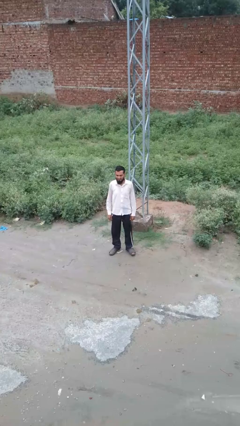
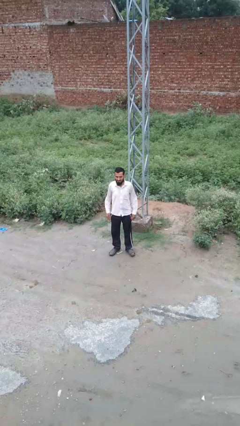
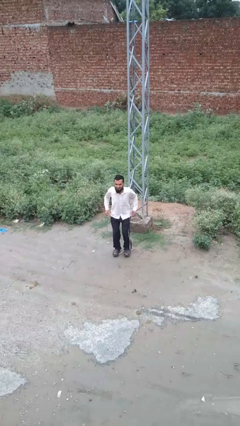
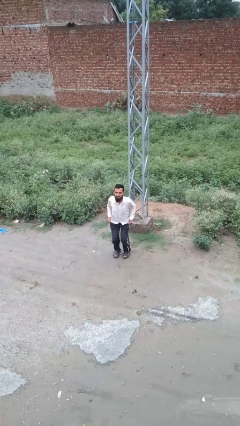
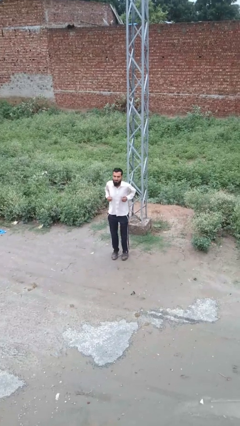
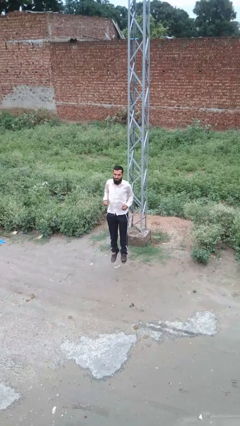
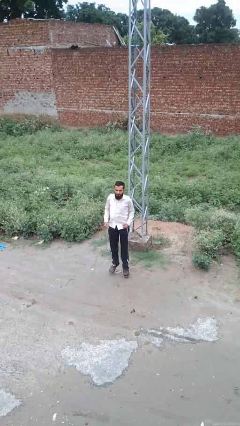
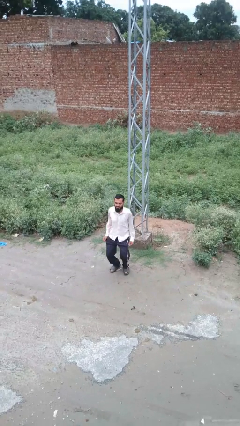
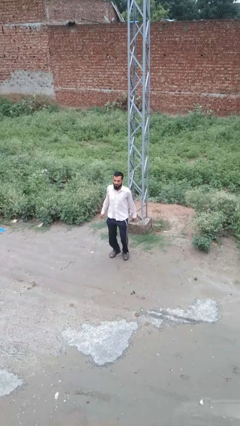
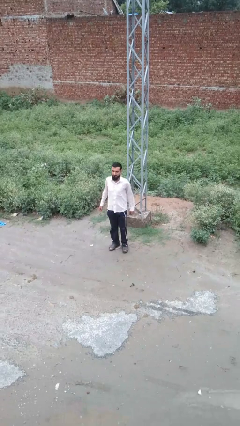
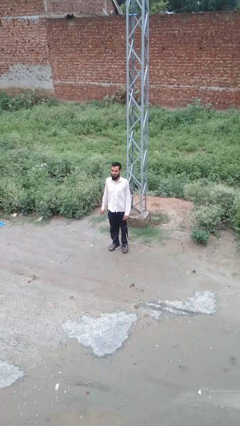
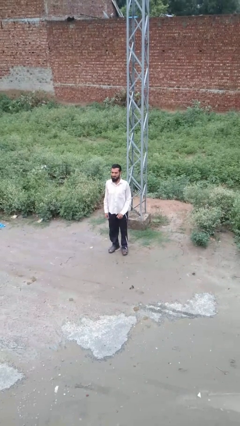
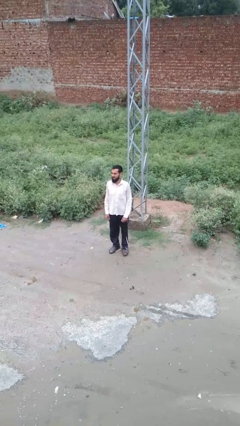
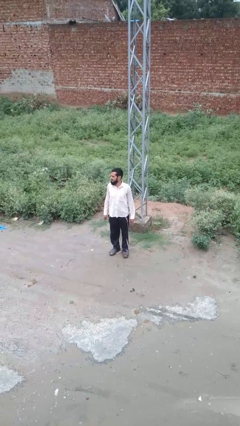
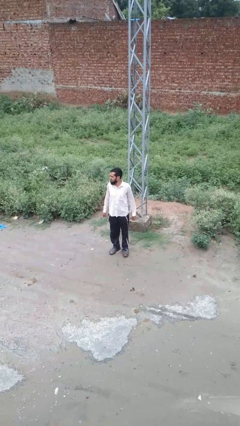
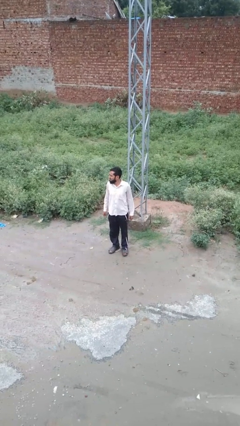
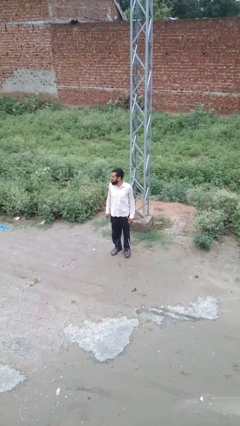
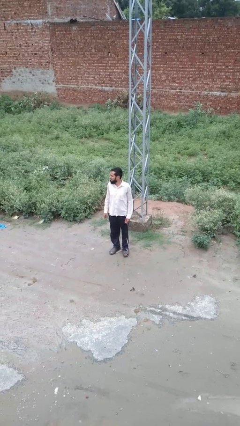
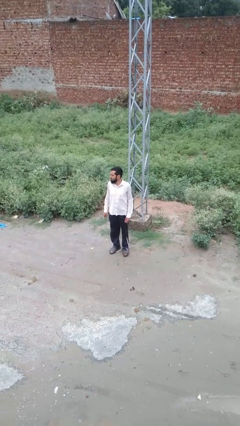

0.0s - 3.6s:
person jumps

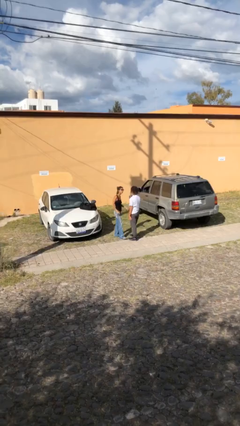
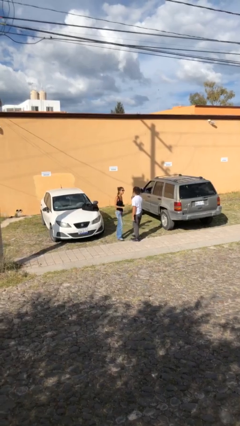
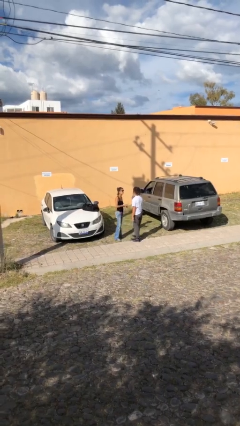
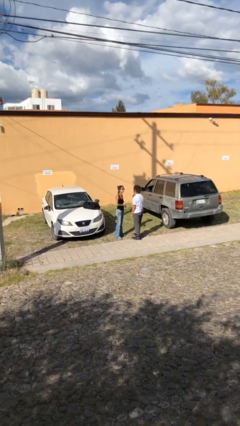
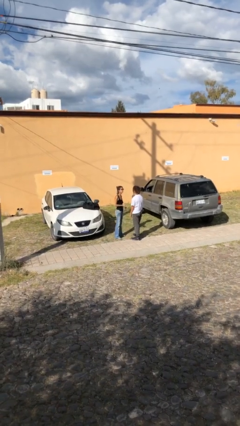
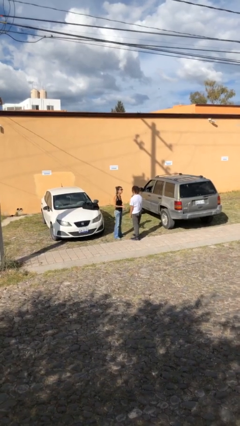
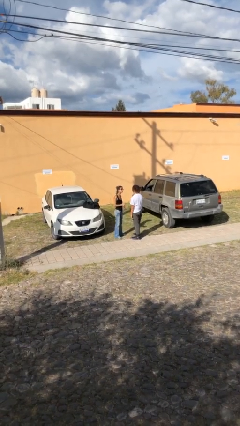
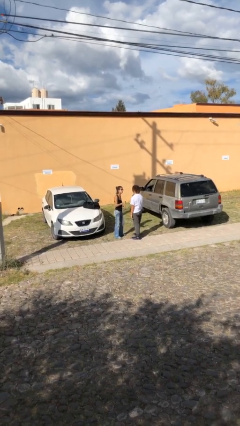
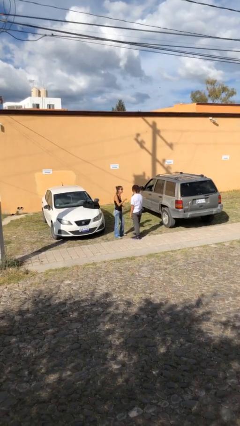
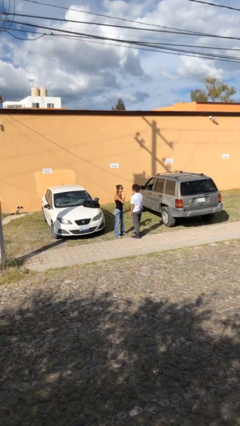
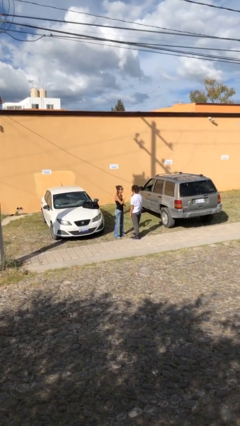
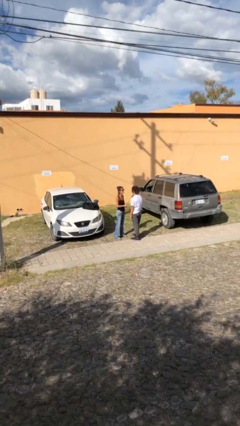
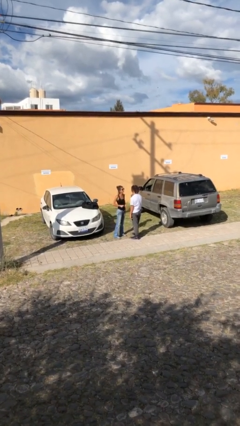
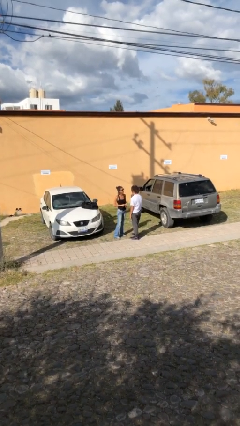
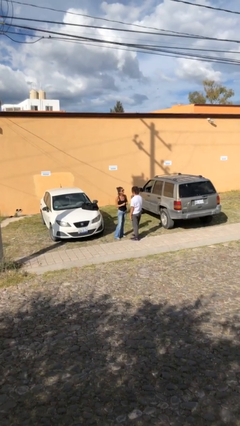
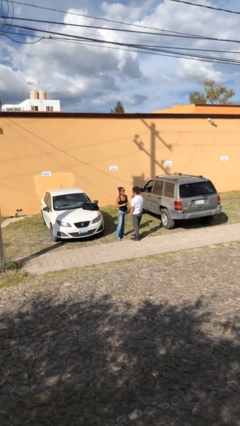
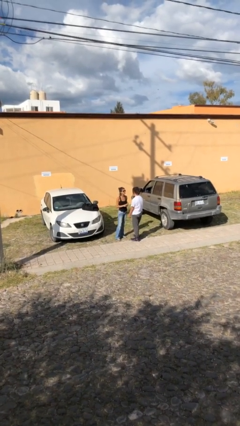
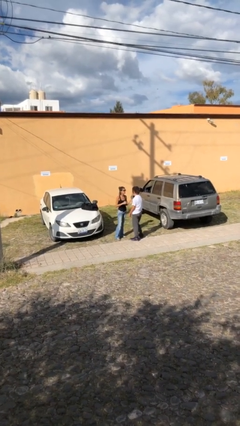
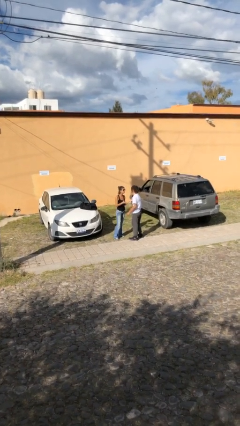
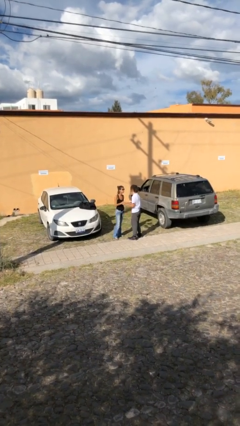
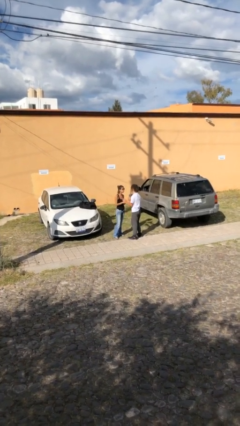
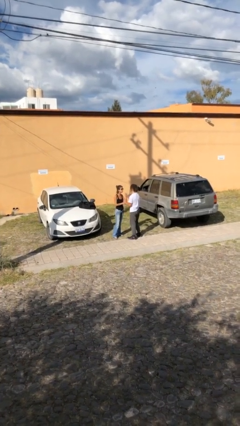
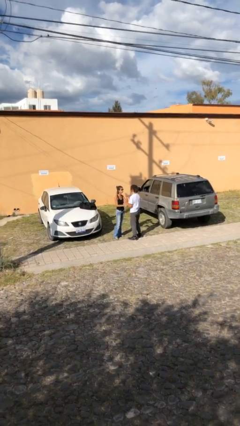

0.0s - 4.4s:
person talks to person

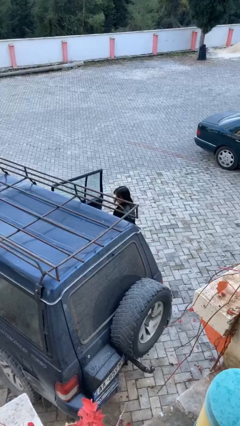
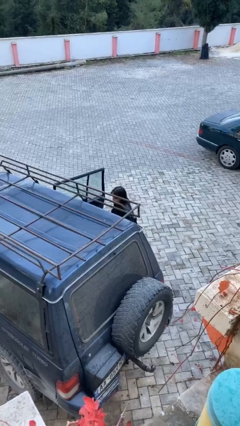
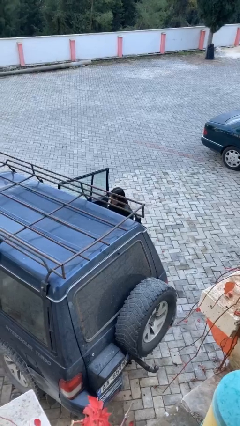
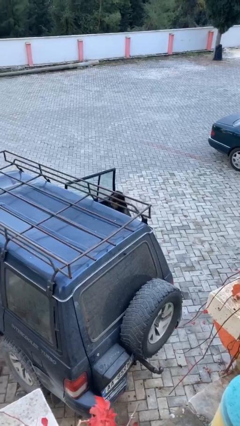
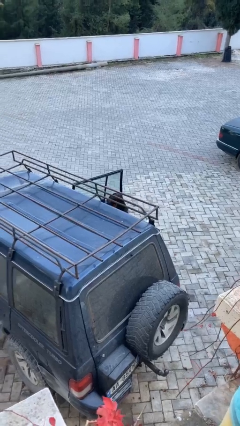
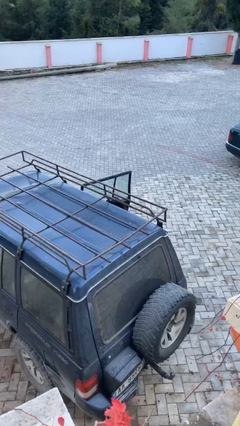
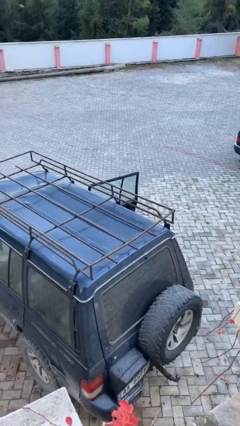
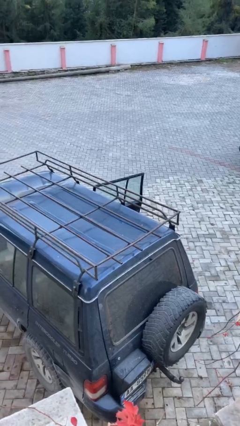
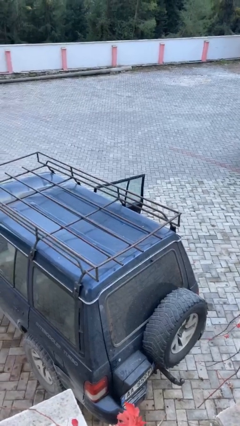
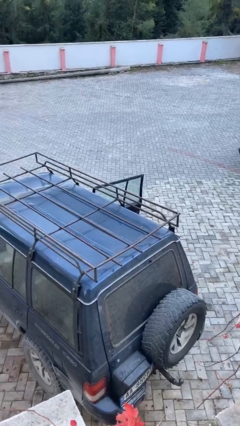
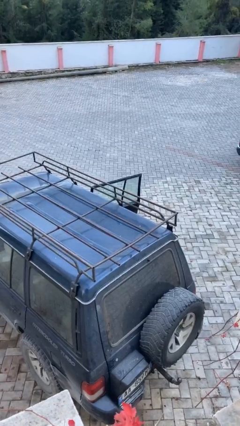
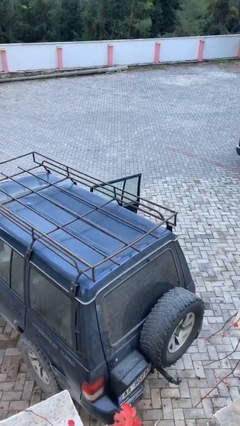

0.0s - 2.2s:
person enters car

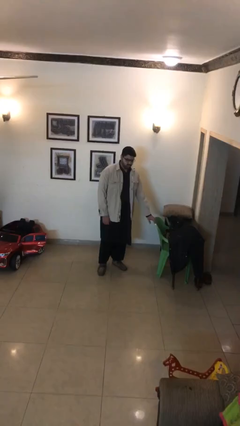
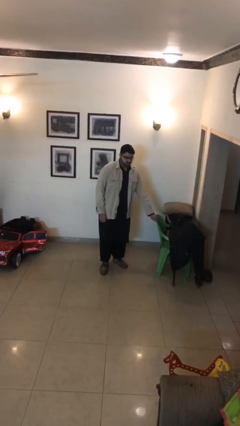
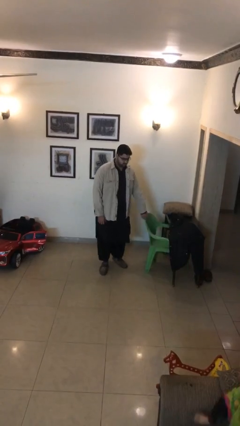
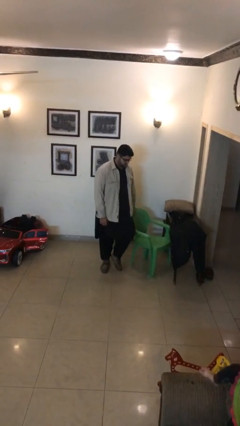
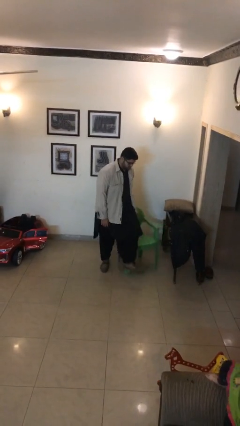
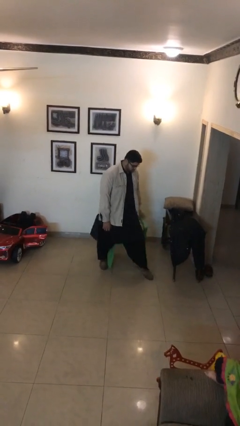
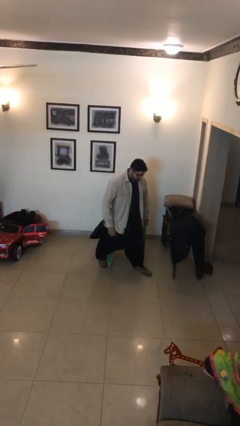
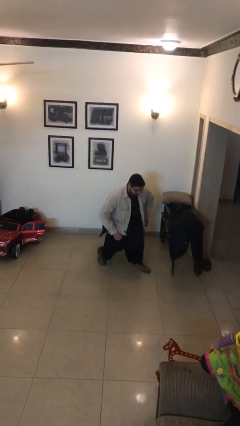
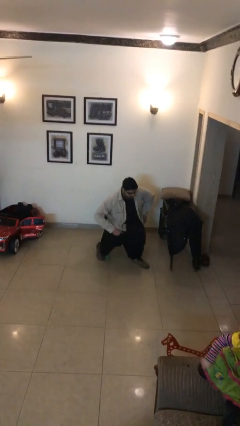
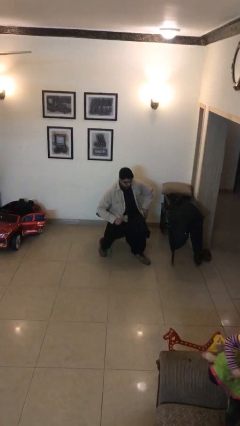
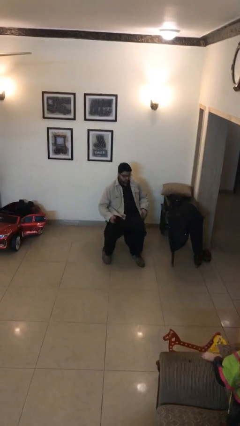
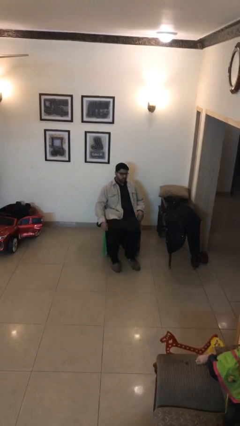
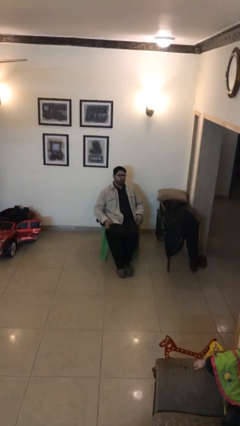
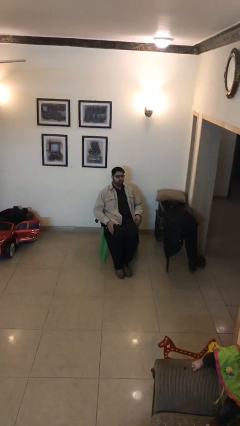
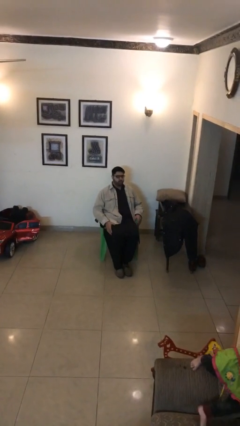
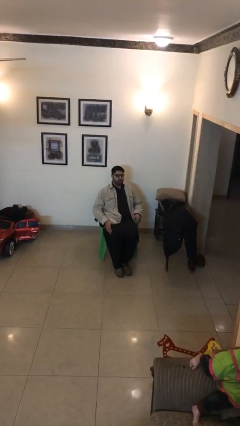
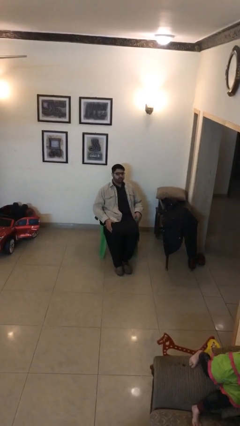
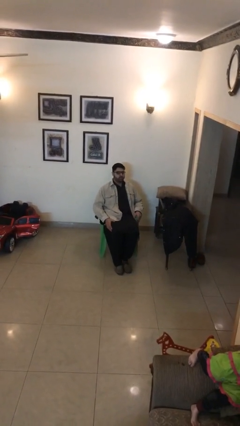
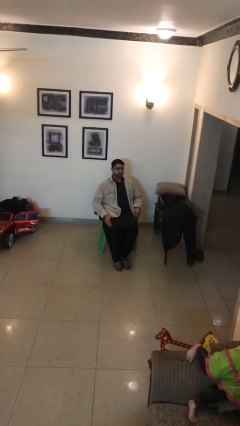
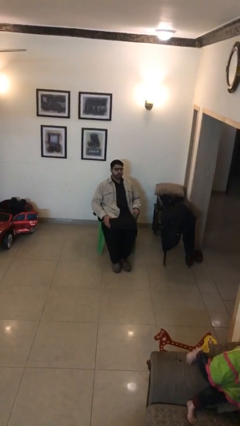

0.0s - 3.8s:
person sits down

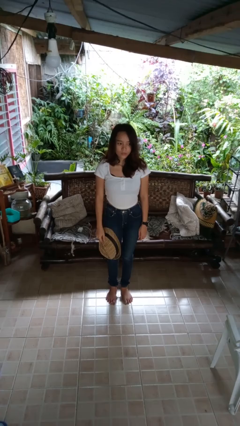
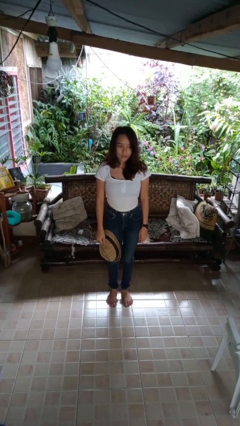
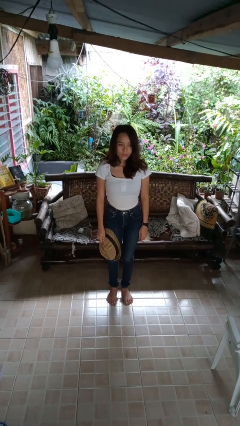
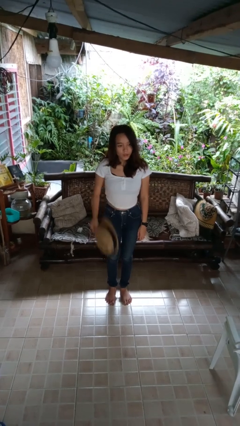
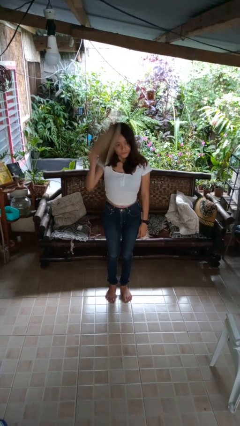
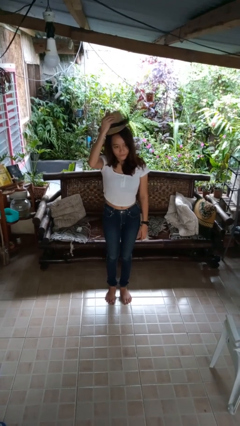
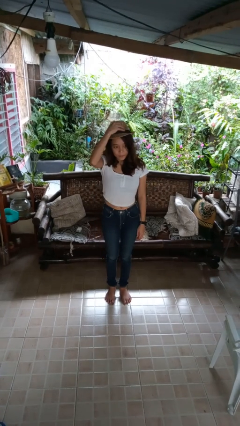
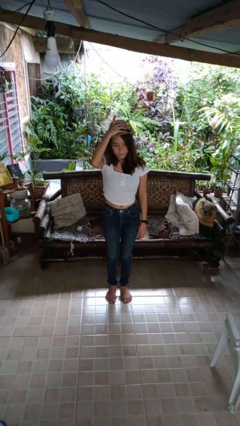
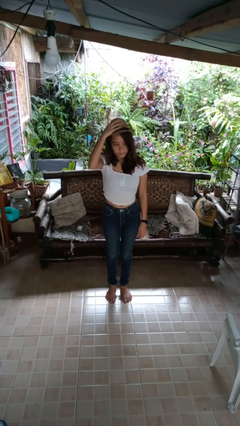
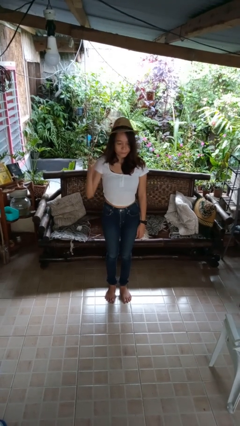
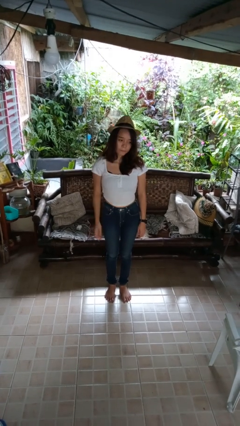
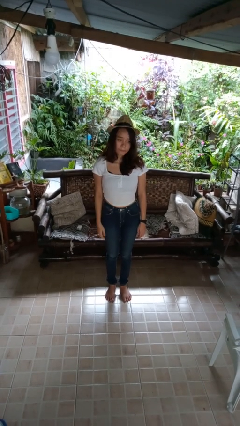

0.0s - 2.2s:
person puts on hat

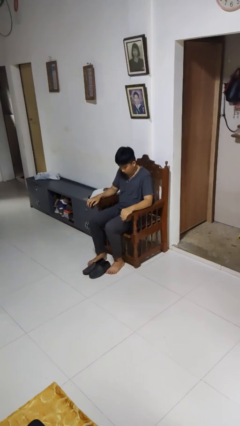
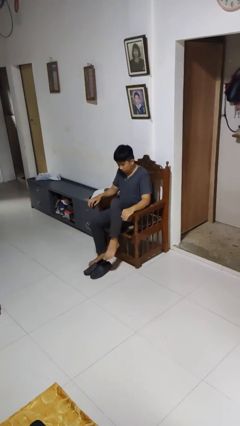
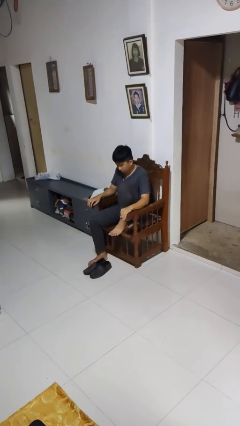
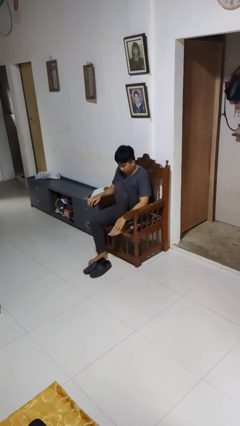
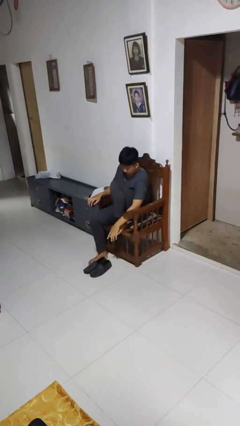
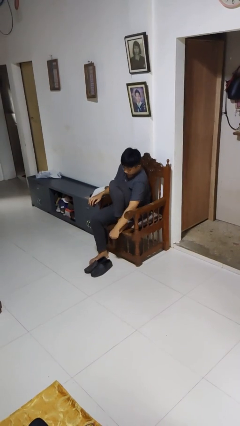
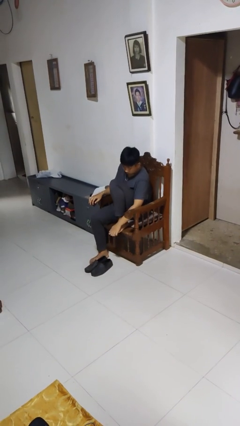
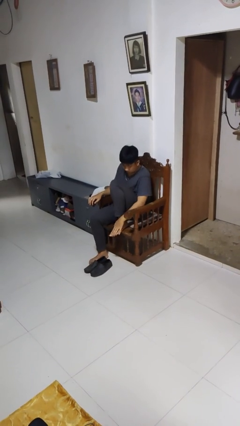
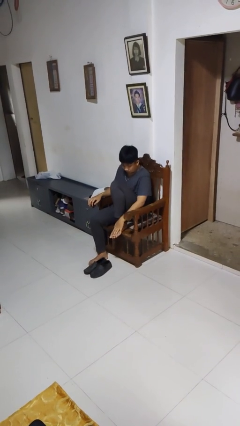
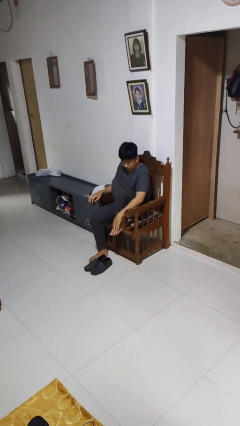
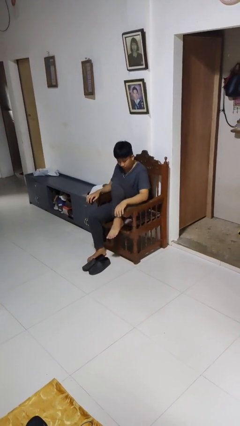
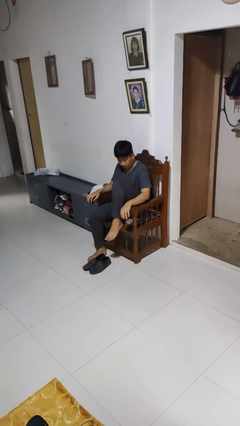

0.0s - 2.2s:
person rubs foot
